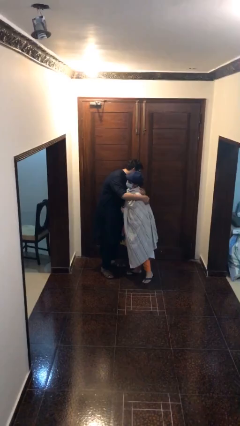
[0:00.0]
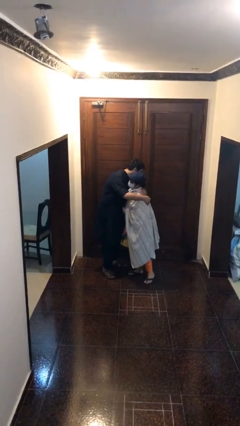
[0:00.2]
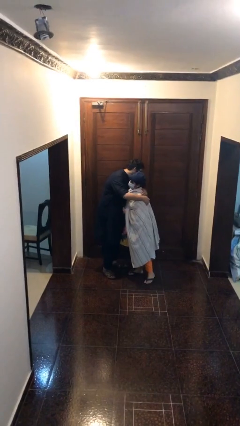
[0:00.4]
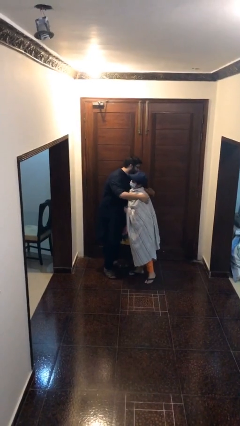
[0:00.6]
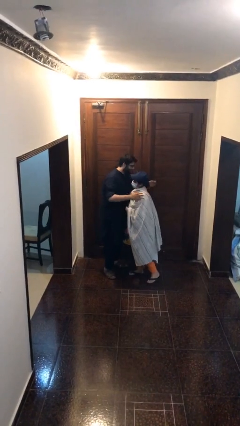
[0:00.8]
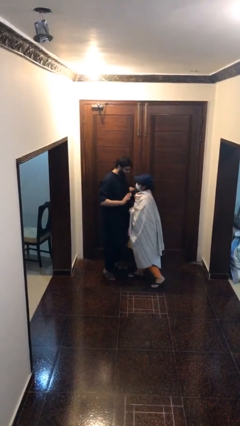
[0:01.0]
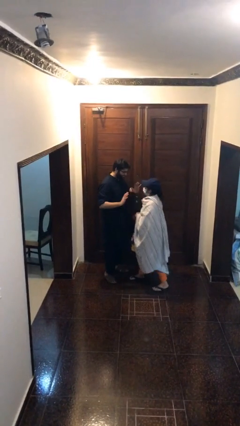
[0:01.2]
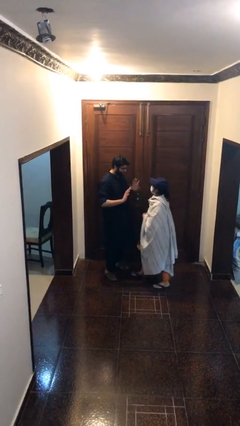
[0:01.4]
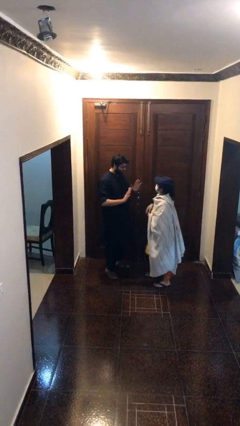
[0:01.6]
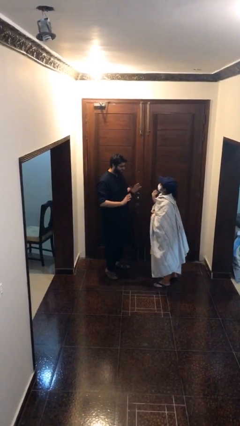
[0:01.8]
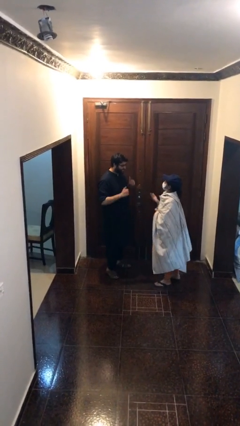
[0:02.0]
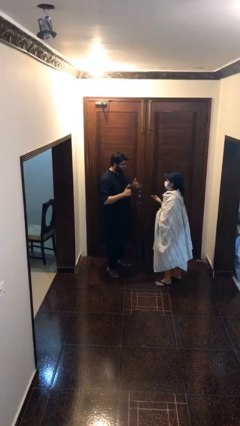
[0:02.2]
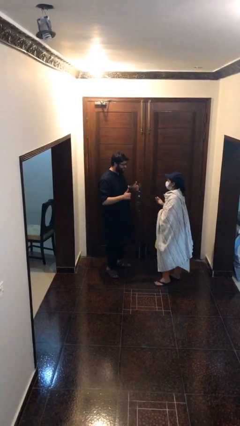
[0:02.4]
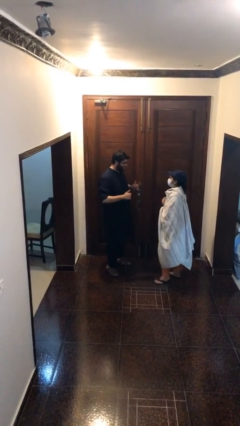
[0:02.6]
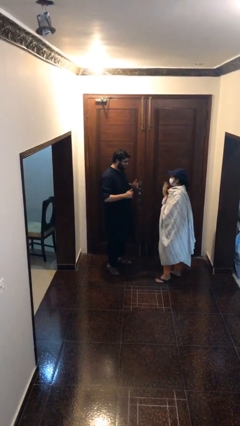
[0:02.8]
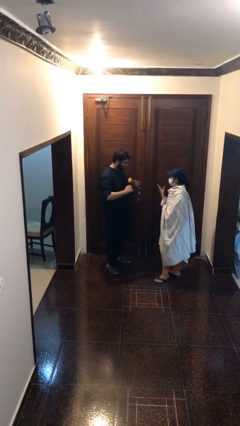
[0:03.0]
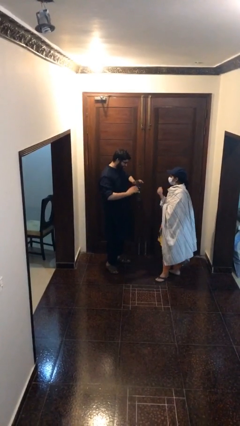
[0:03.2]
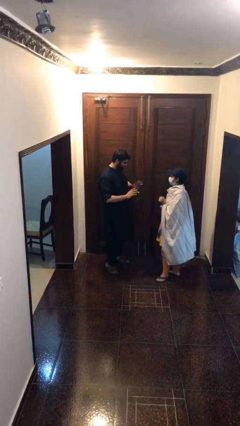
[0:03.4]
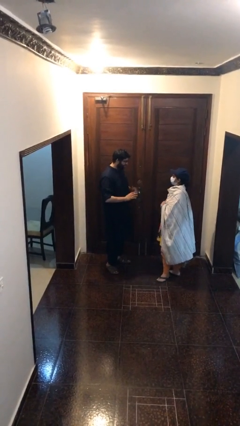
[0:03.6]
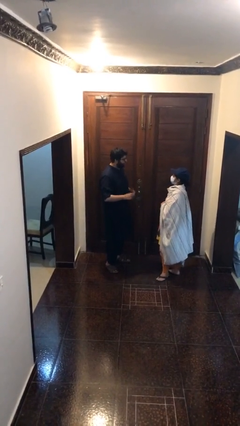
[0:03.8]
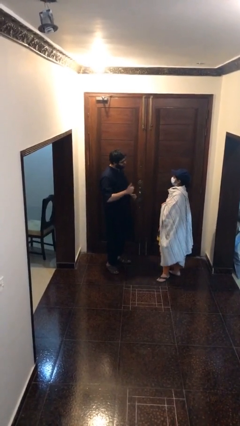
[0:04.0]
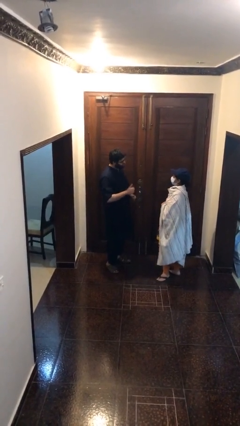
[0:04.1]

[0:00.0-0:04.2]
person talks to person

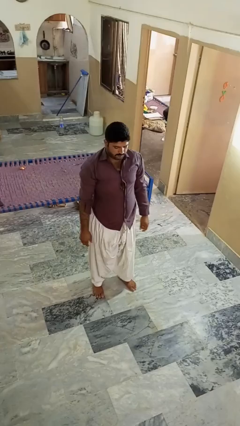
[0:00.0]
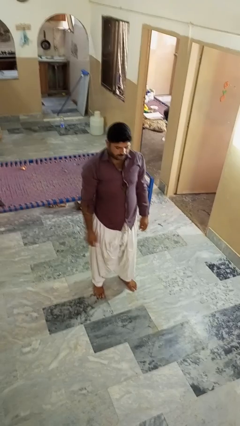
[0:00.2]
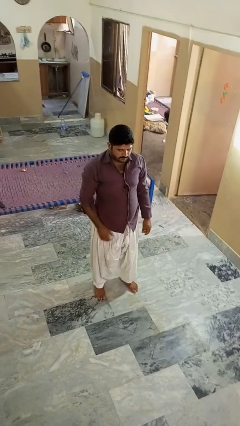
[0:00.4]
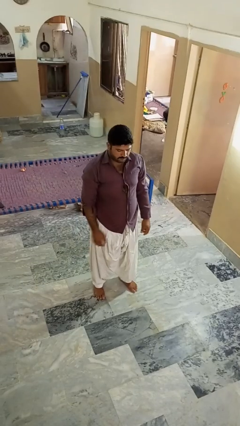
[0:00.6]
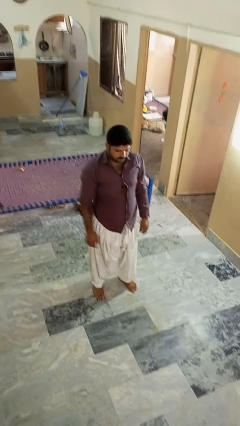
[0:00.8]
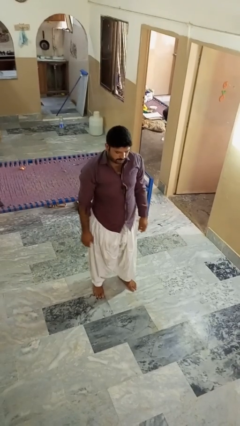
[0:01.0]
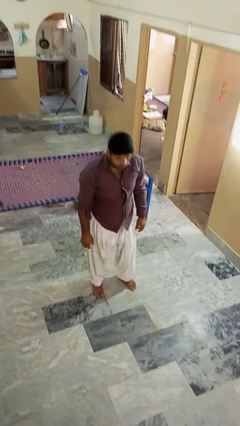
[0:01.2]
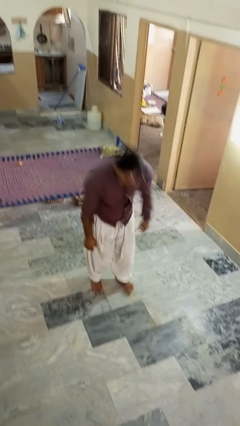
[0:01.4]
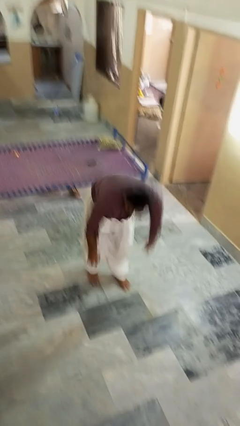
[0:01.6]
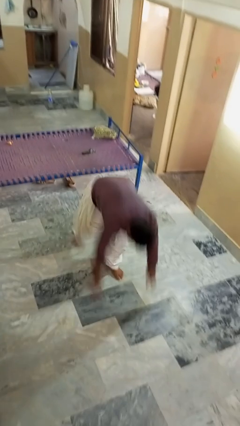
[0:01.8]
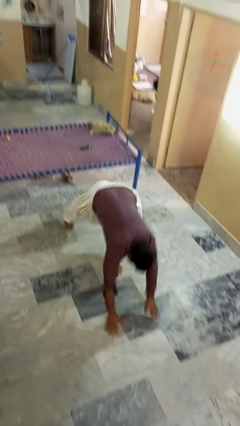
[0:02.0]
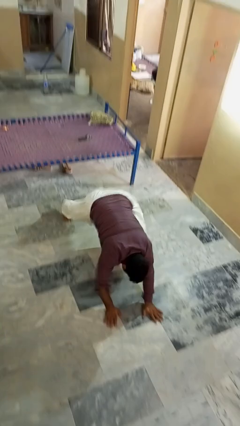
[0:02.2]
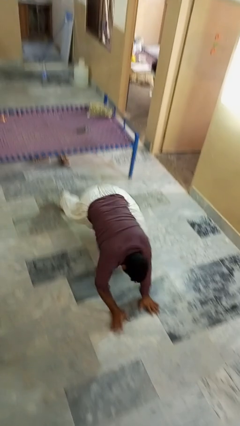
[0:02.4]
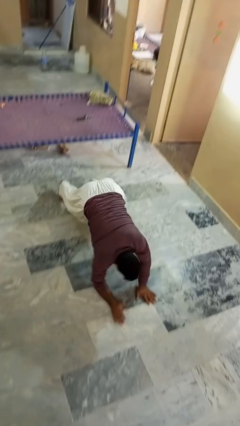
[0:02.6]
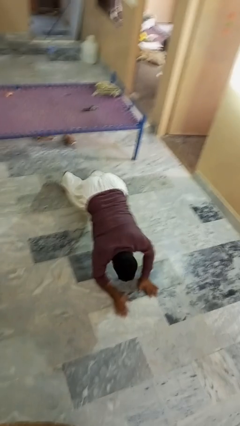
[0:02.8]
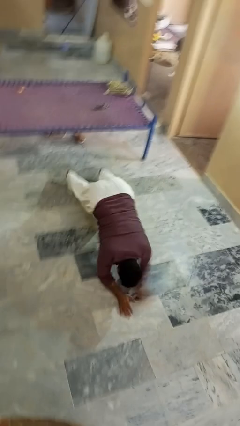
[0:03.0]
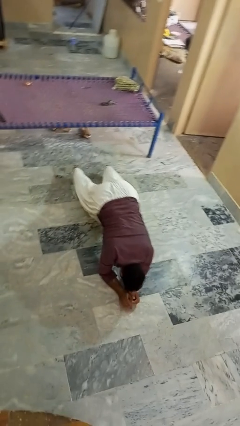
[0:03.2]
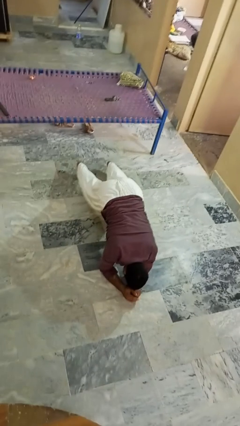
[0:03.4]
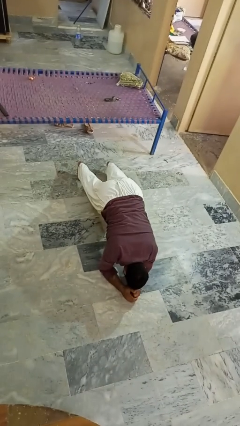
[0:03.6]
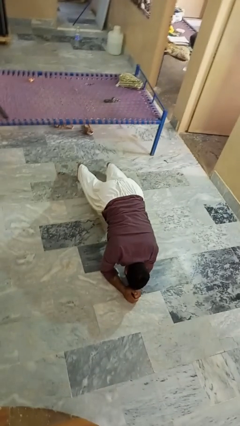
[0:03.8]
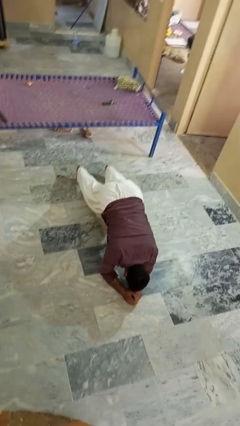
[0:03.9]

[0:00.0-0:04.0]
person exercises with plank

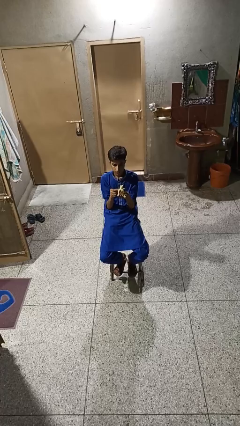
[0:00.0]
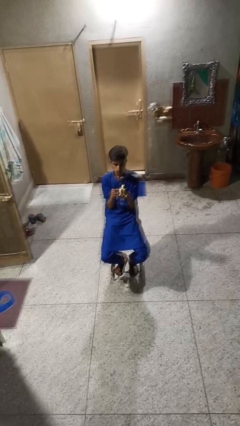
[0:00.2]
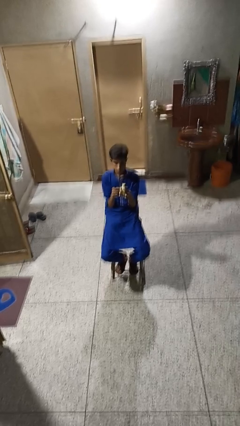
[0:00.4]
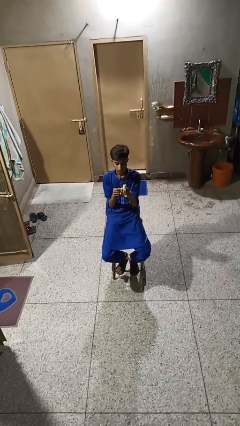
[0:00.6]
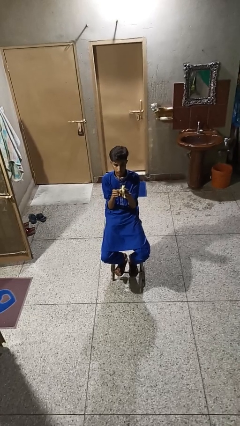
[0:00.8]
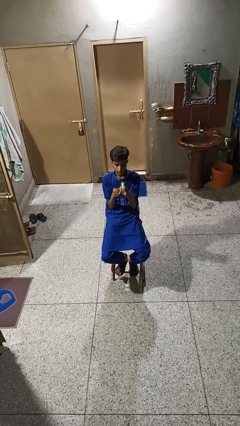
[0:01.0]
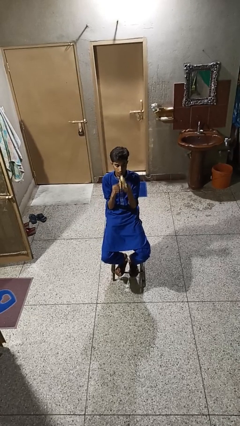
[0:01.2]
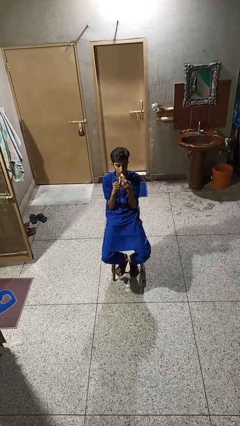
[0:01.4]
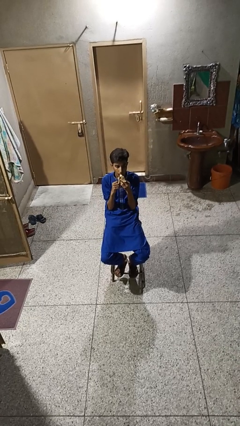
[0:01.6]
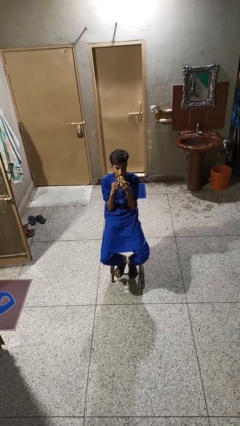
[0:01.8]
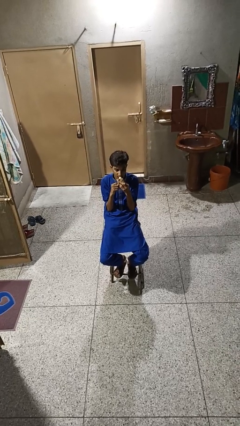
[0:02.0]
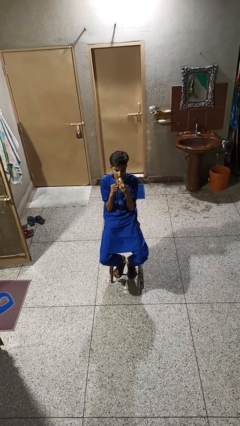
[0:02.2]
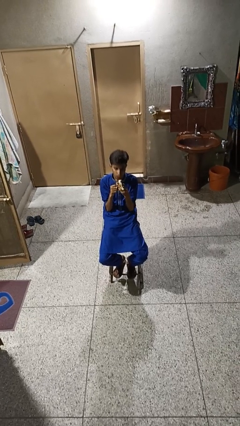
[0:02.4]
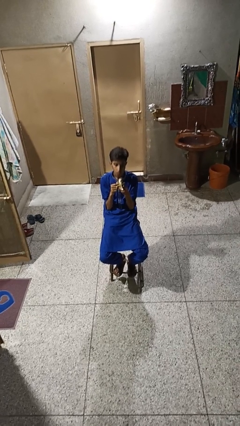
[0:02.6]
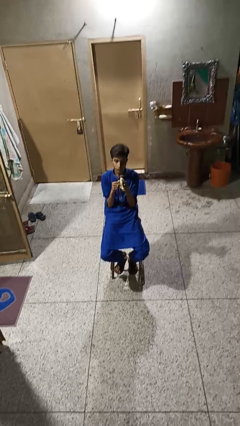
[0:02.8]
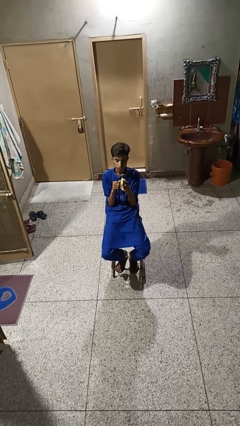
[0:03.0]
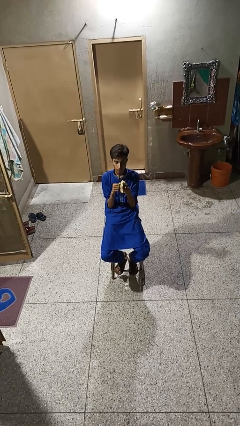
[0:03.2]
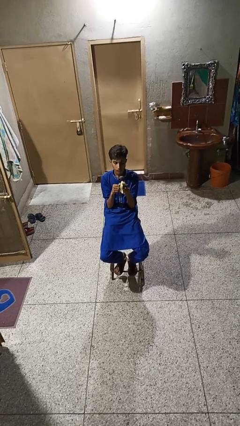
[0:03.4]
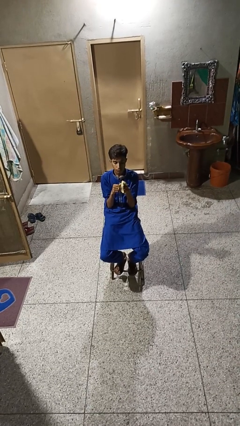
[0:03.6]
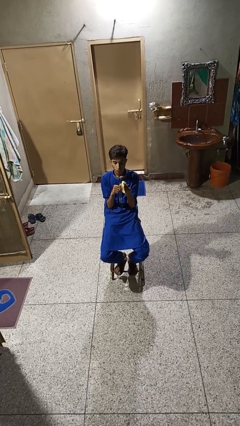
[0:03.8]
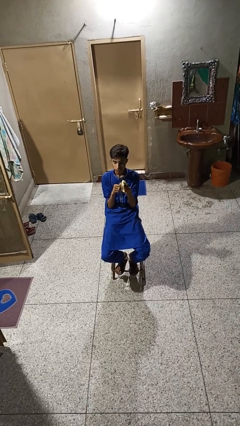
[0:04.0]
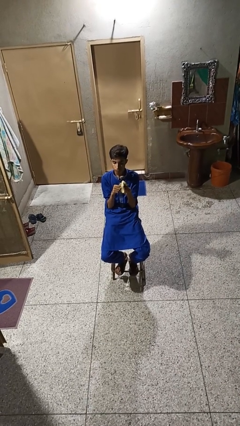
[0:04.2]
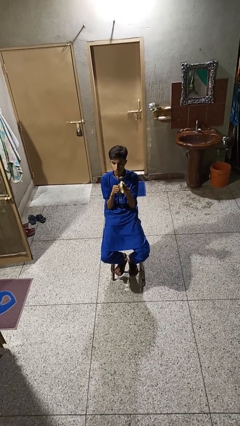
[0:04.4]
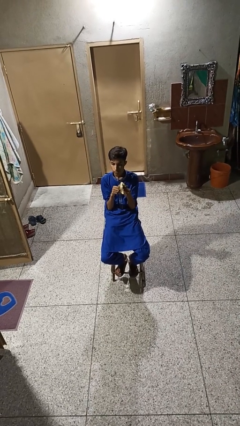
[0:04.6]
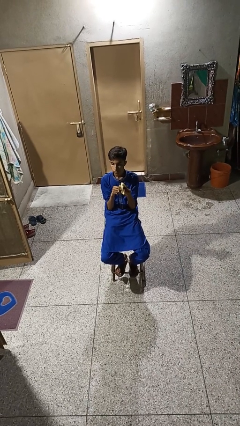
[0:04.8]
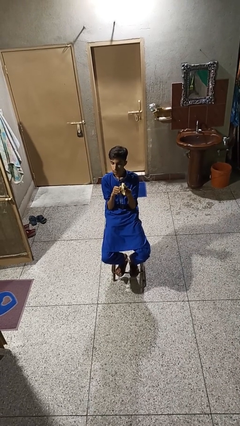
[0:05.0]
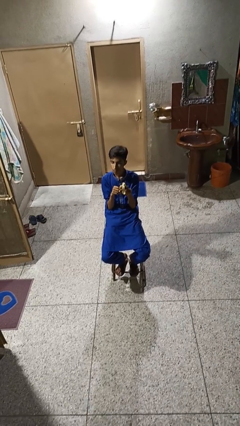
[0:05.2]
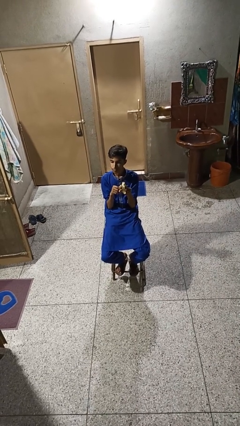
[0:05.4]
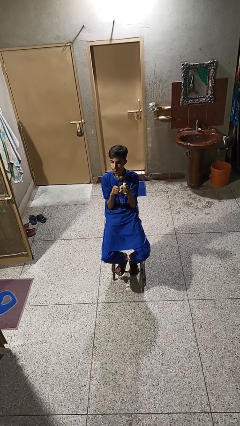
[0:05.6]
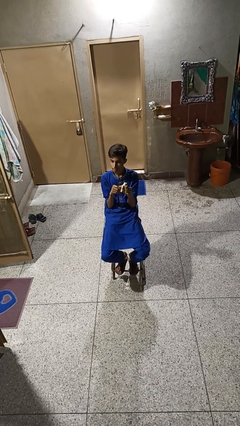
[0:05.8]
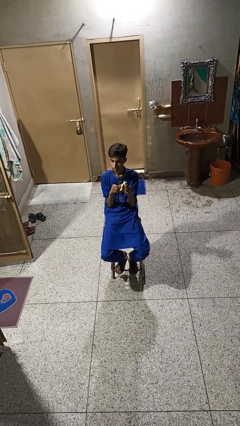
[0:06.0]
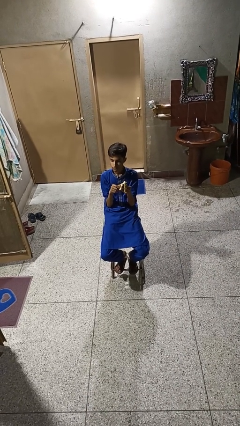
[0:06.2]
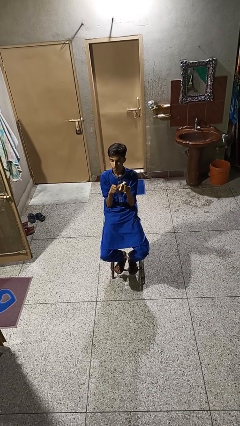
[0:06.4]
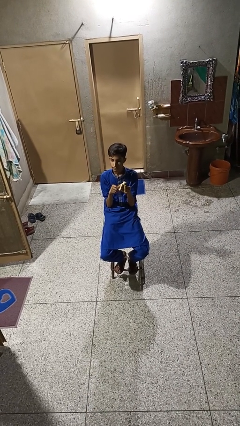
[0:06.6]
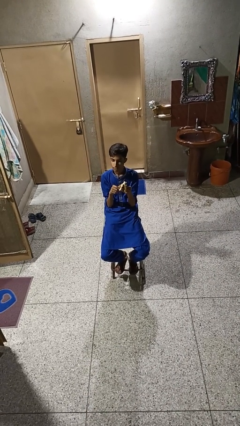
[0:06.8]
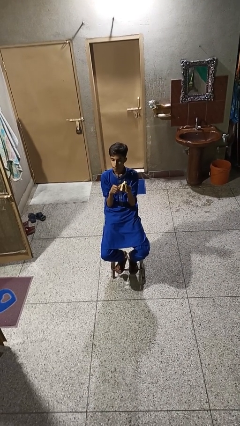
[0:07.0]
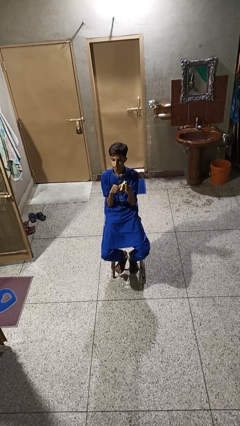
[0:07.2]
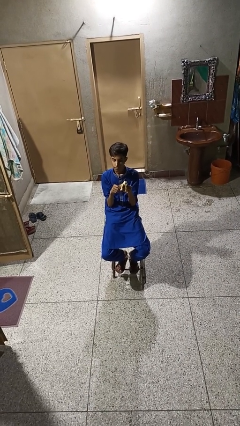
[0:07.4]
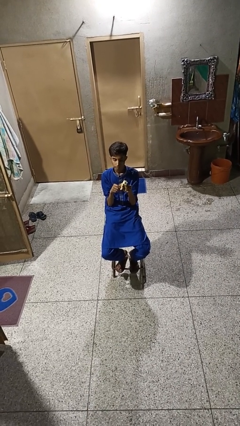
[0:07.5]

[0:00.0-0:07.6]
person eats banana

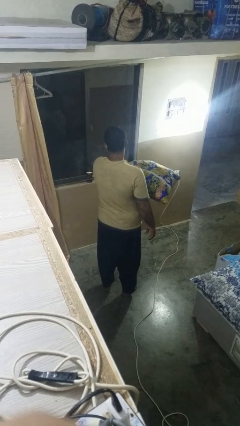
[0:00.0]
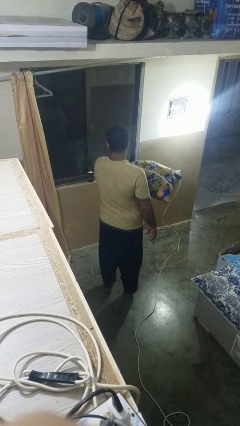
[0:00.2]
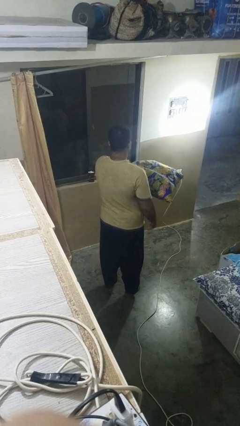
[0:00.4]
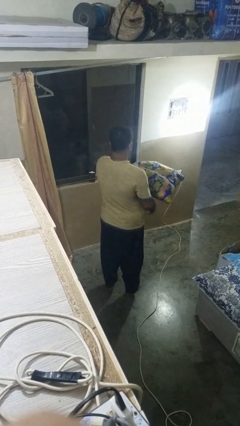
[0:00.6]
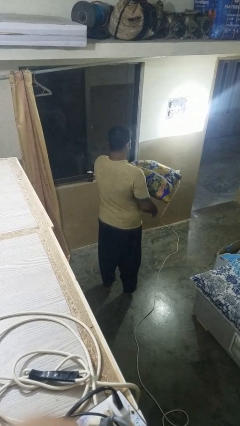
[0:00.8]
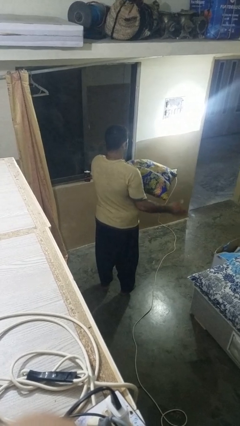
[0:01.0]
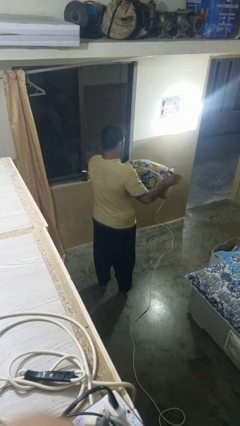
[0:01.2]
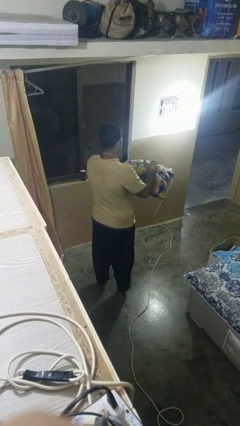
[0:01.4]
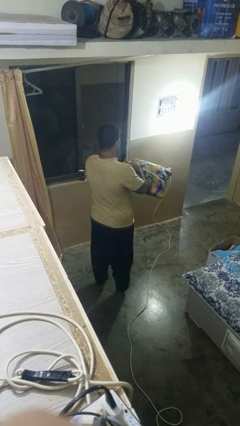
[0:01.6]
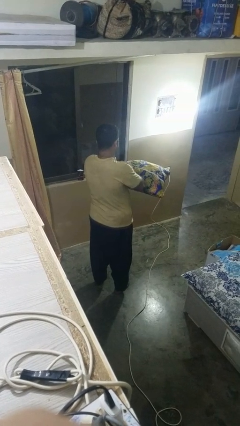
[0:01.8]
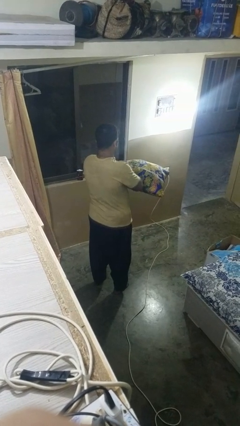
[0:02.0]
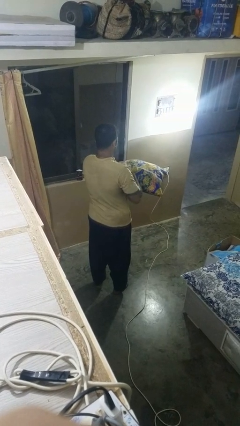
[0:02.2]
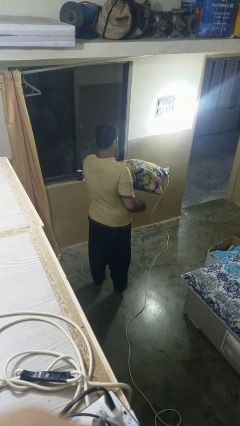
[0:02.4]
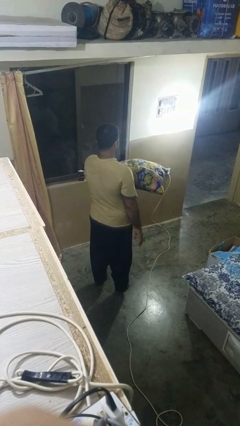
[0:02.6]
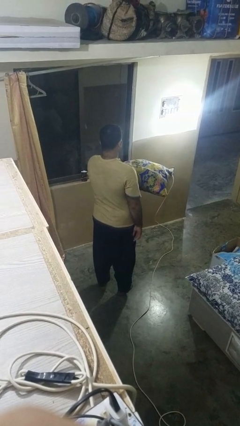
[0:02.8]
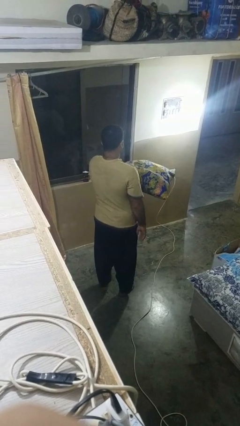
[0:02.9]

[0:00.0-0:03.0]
person waves hand over object
